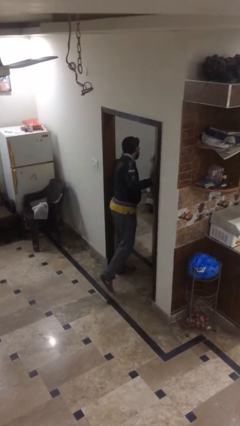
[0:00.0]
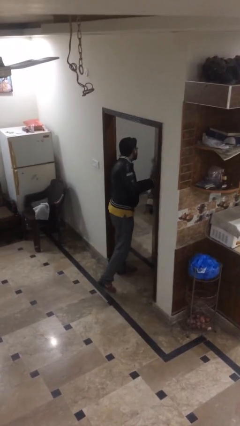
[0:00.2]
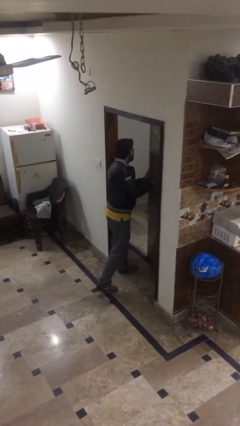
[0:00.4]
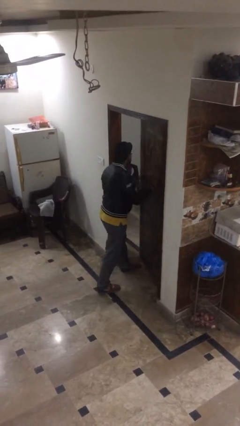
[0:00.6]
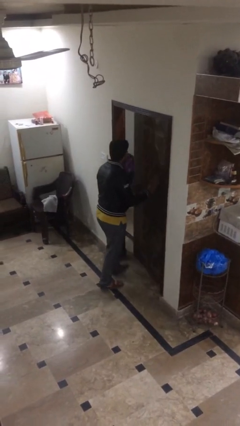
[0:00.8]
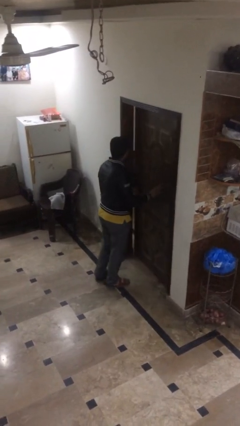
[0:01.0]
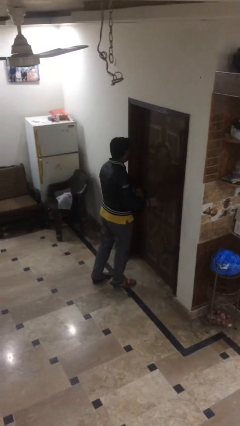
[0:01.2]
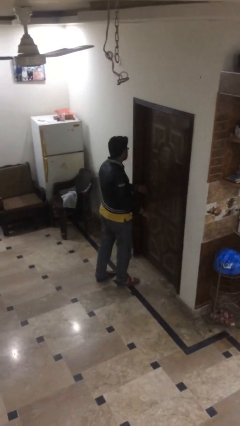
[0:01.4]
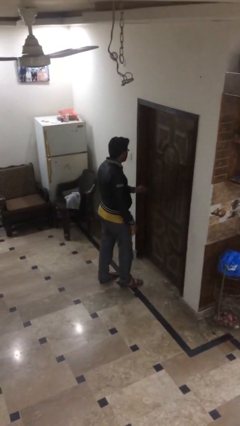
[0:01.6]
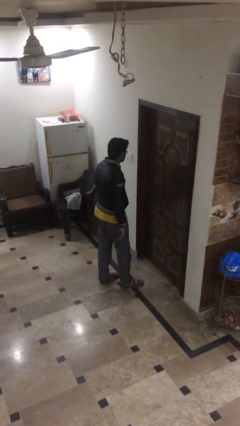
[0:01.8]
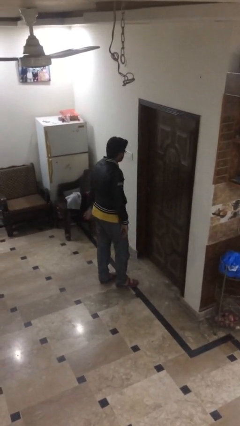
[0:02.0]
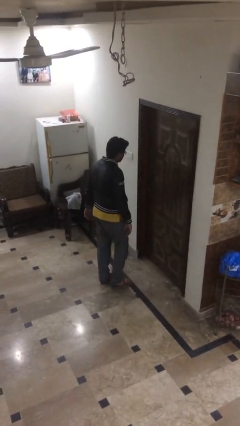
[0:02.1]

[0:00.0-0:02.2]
person closes facility door

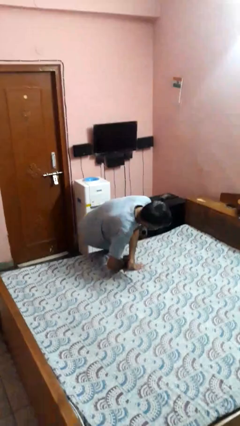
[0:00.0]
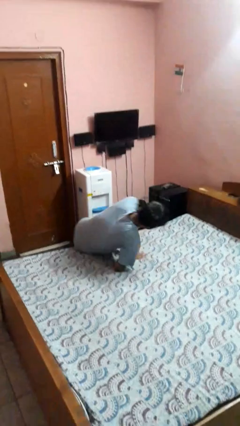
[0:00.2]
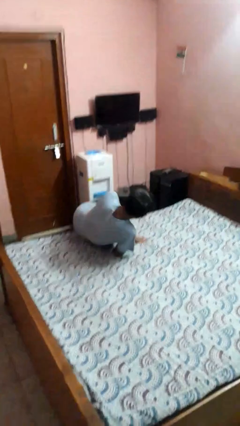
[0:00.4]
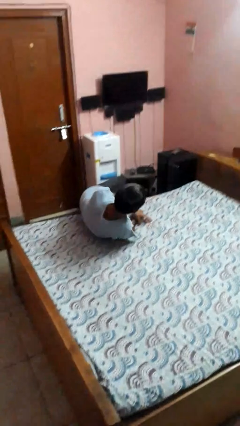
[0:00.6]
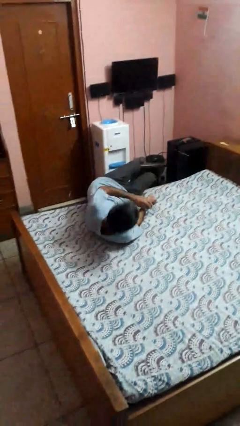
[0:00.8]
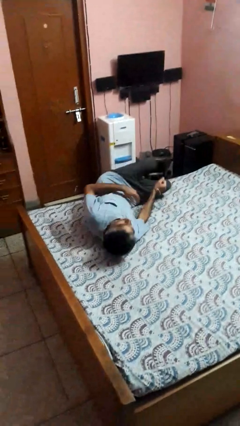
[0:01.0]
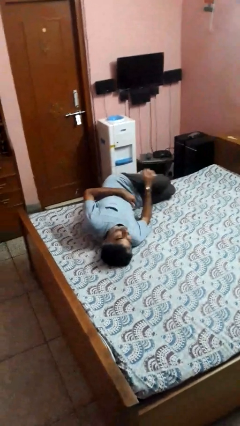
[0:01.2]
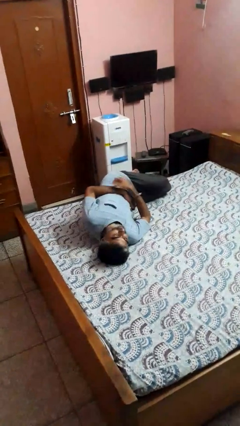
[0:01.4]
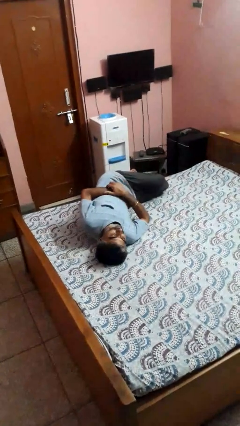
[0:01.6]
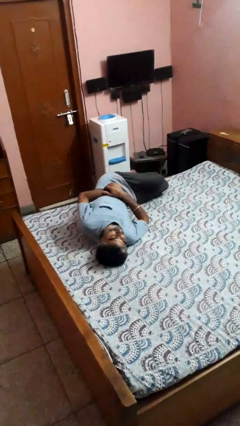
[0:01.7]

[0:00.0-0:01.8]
person lies down on bed

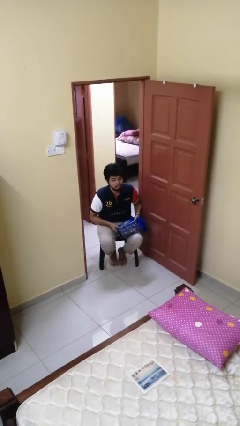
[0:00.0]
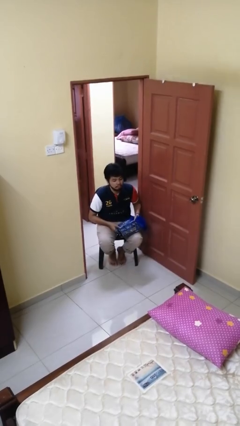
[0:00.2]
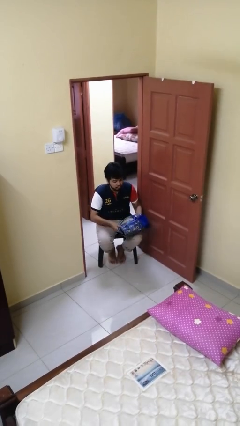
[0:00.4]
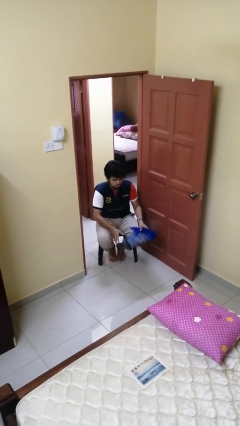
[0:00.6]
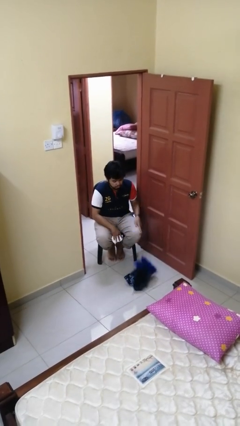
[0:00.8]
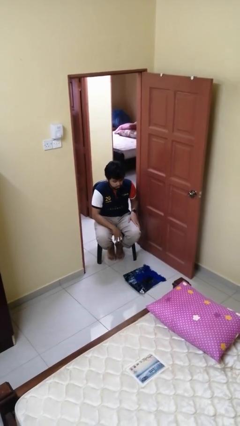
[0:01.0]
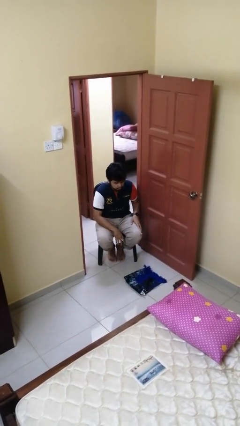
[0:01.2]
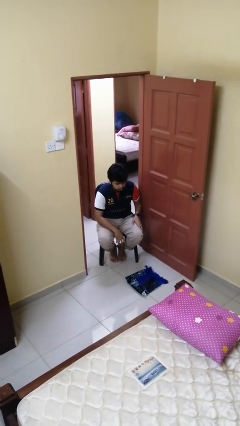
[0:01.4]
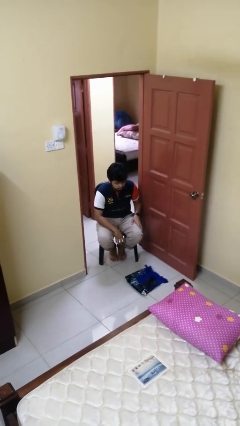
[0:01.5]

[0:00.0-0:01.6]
person drops object

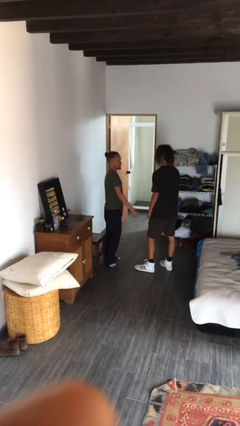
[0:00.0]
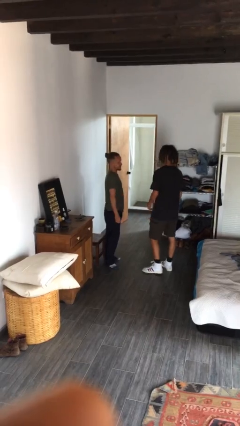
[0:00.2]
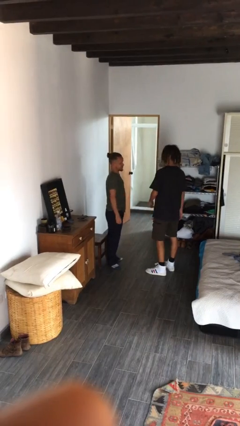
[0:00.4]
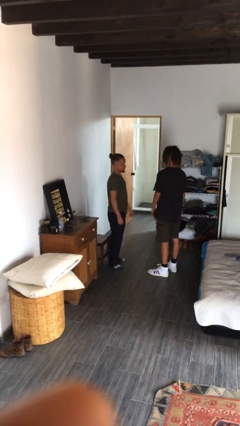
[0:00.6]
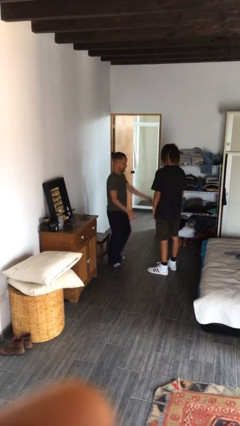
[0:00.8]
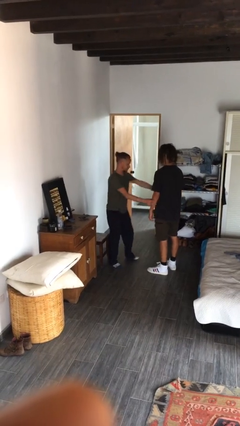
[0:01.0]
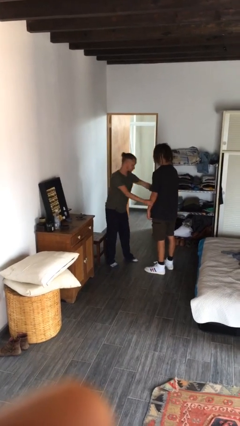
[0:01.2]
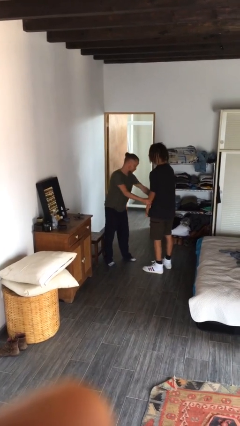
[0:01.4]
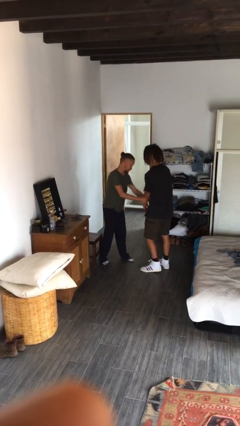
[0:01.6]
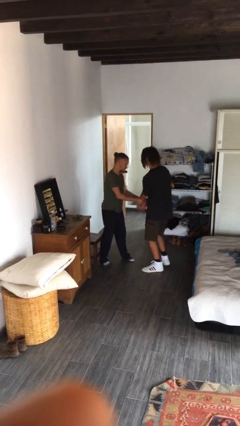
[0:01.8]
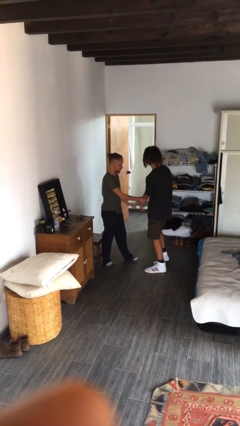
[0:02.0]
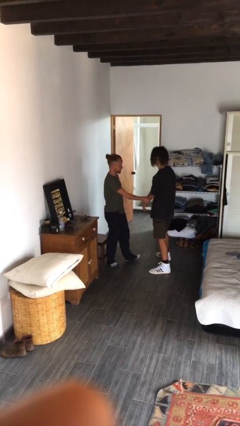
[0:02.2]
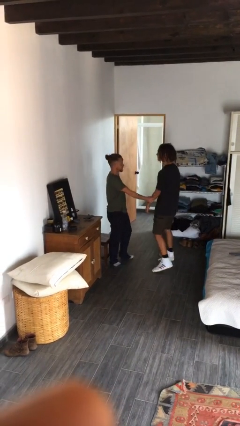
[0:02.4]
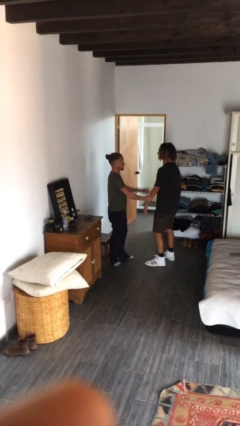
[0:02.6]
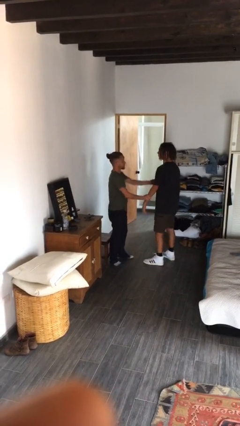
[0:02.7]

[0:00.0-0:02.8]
person grabs person by forearm

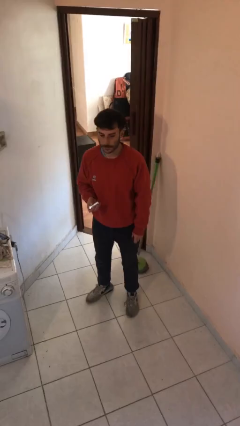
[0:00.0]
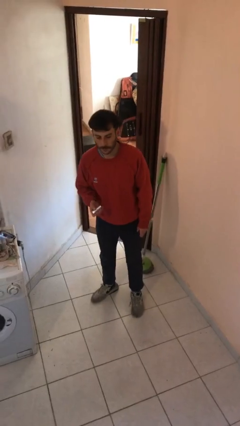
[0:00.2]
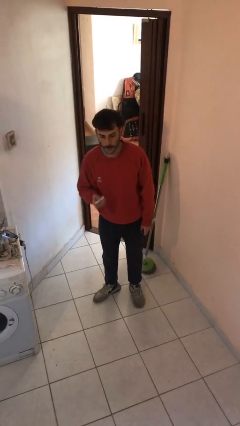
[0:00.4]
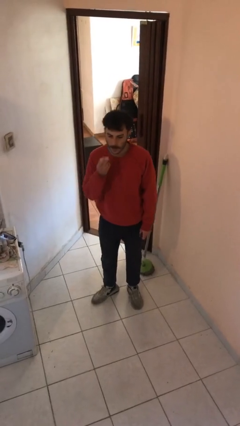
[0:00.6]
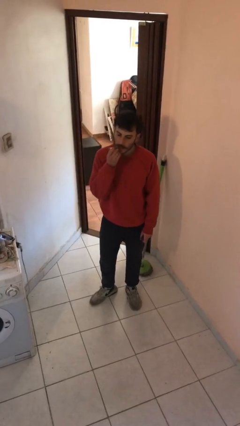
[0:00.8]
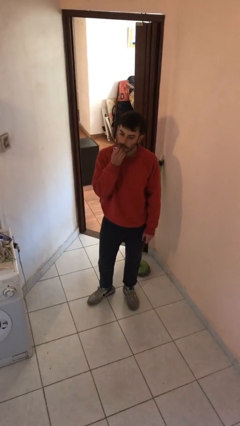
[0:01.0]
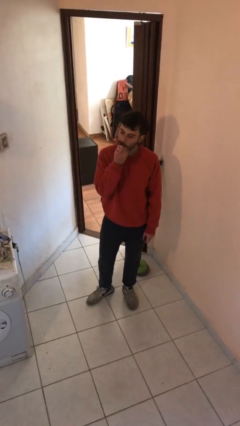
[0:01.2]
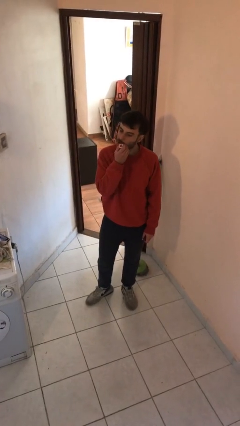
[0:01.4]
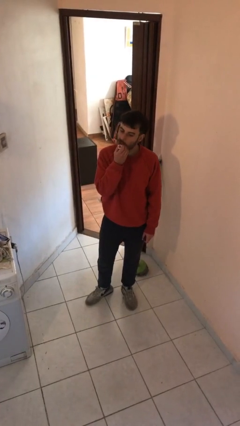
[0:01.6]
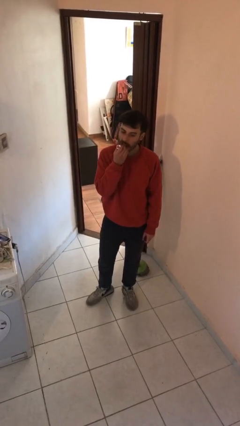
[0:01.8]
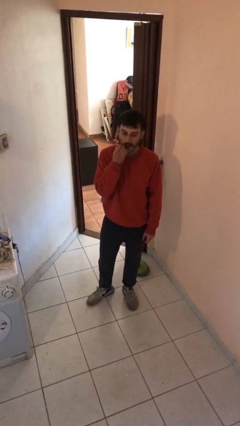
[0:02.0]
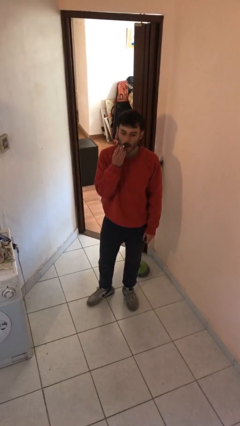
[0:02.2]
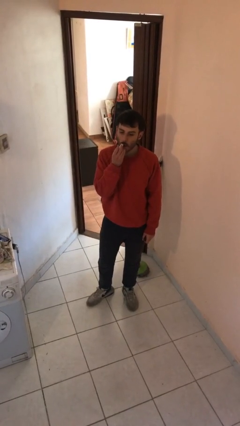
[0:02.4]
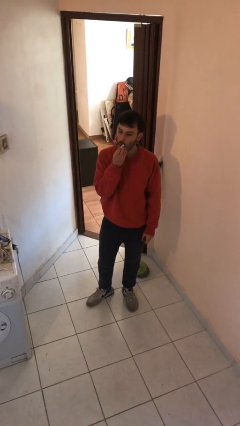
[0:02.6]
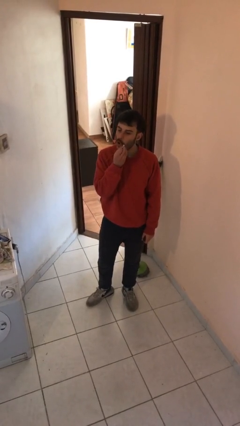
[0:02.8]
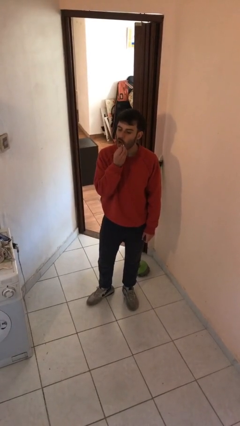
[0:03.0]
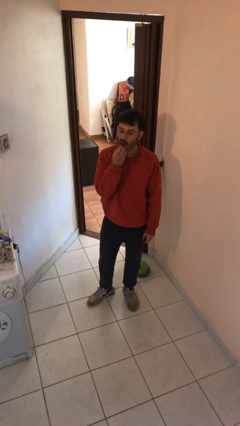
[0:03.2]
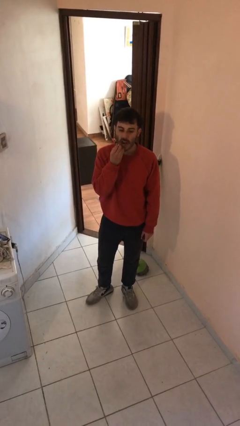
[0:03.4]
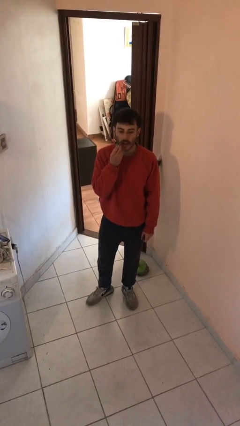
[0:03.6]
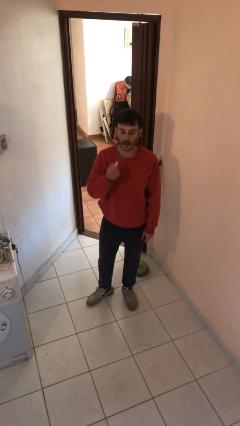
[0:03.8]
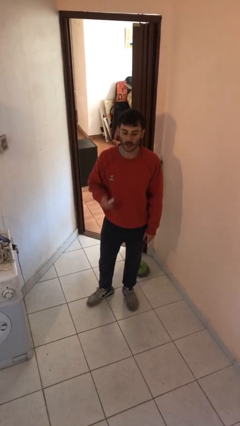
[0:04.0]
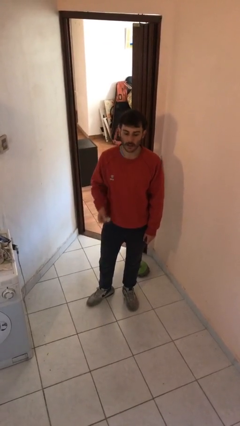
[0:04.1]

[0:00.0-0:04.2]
person applies lip makeup

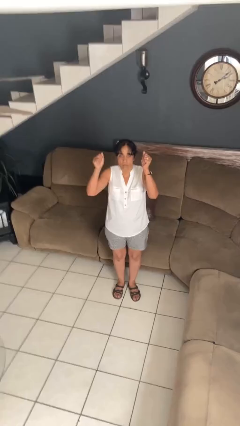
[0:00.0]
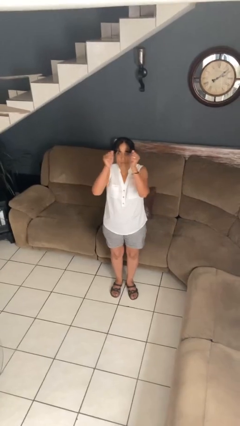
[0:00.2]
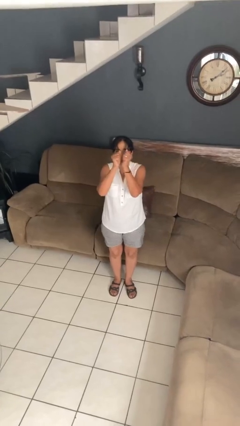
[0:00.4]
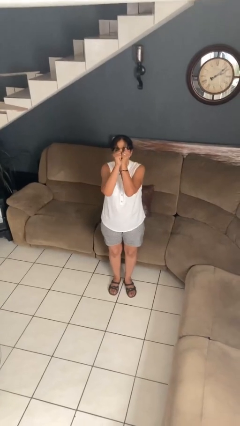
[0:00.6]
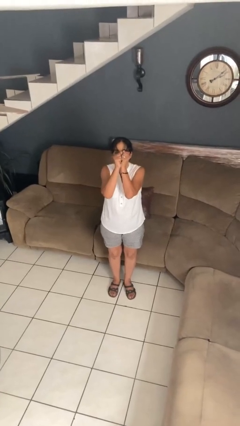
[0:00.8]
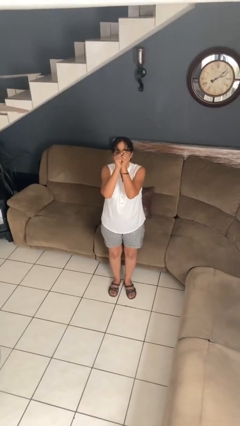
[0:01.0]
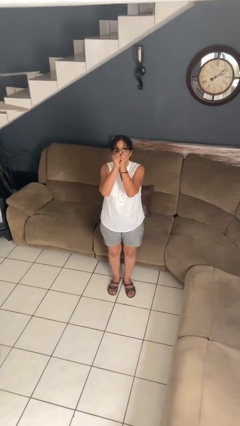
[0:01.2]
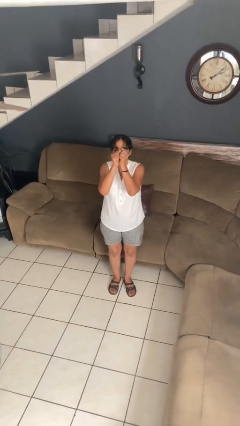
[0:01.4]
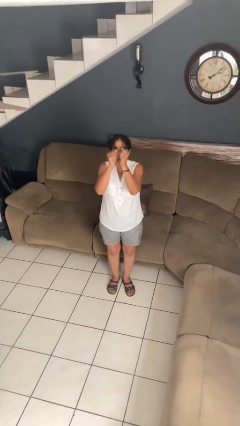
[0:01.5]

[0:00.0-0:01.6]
person gestures zoom out

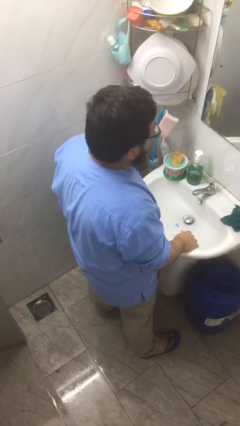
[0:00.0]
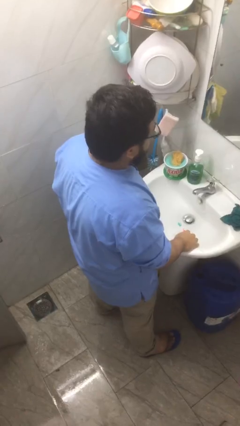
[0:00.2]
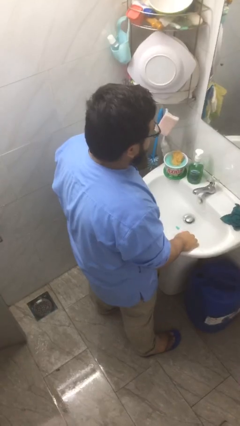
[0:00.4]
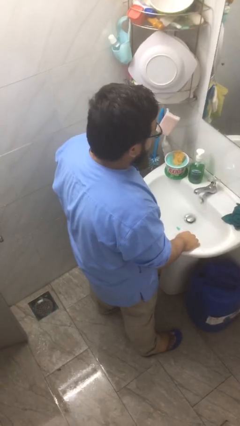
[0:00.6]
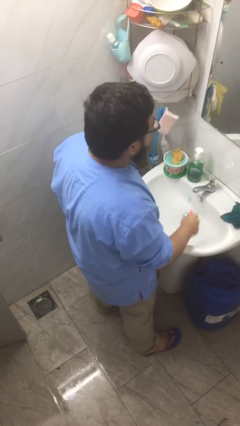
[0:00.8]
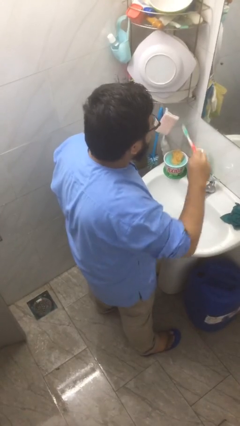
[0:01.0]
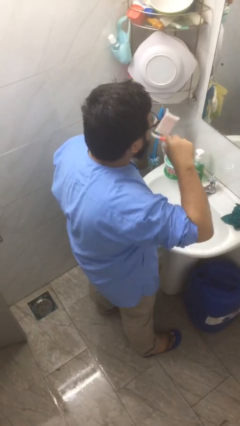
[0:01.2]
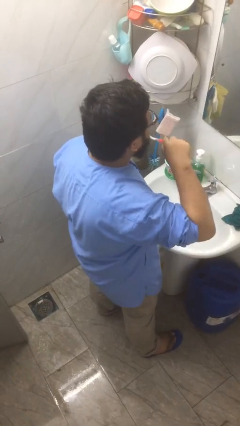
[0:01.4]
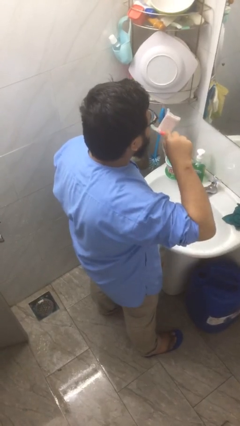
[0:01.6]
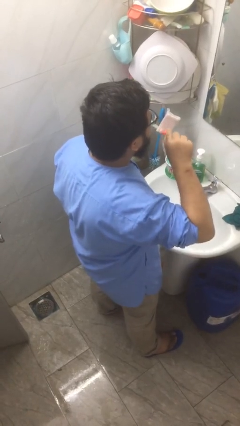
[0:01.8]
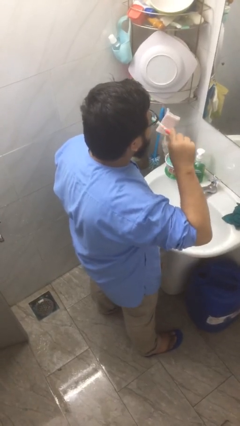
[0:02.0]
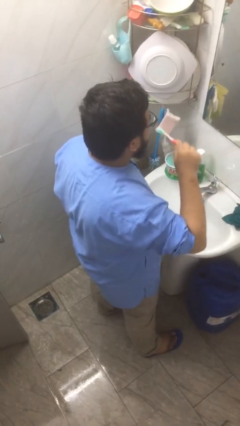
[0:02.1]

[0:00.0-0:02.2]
person brushes teeth

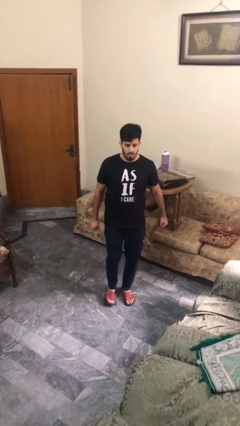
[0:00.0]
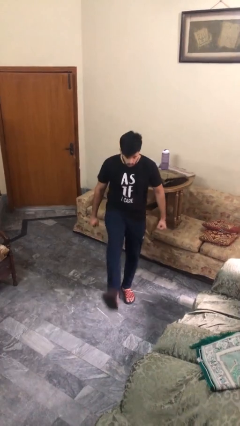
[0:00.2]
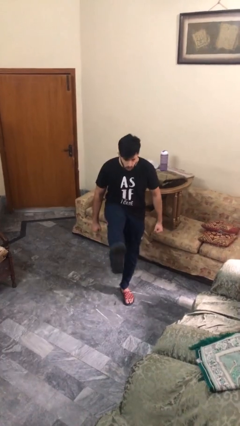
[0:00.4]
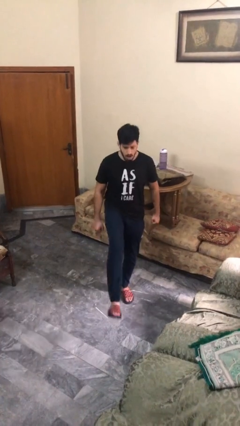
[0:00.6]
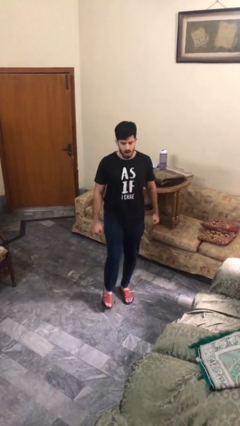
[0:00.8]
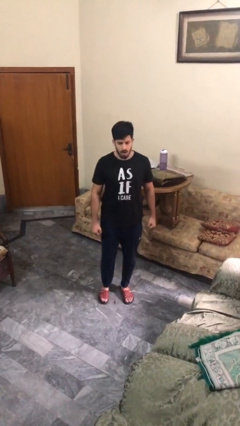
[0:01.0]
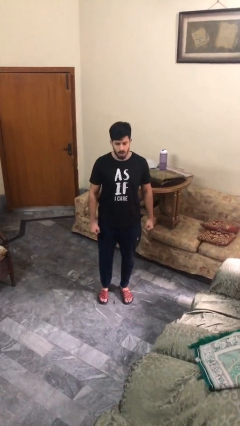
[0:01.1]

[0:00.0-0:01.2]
person karate kicks
